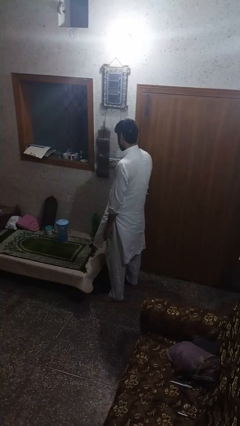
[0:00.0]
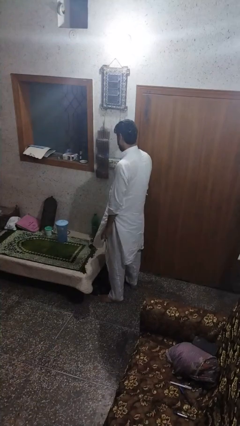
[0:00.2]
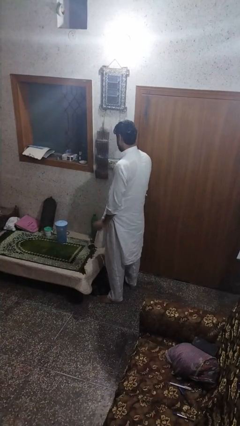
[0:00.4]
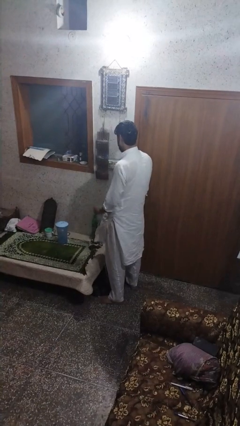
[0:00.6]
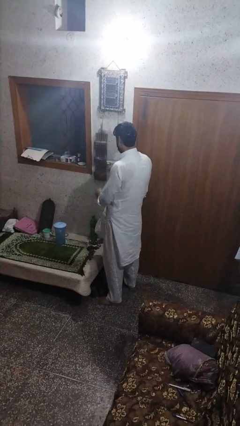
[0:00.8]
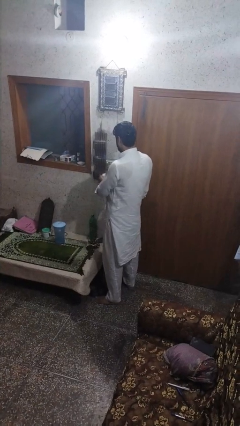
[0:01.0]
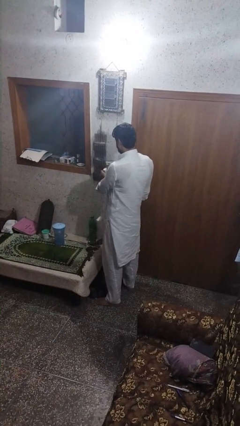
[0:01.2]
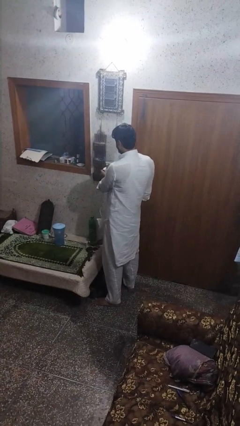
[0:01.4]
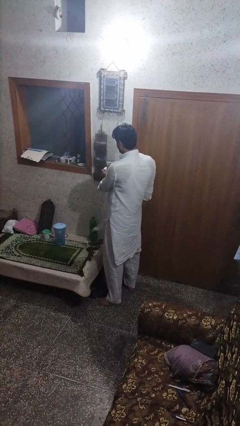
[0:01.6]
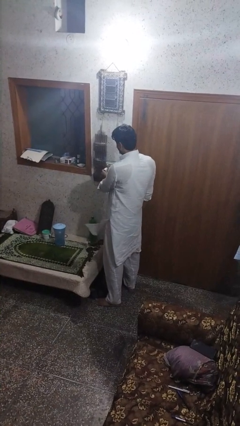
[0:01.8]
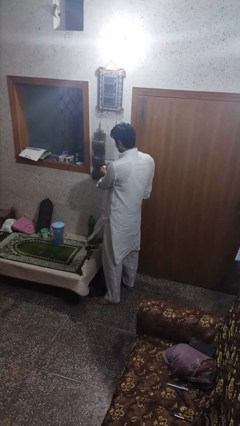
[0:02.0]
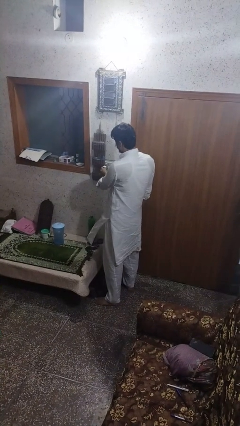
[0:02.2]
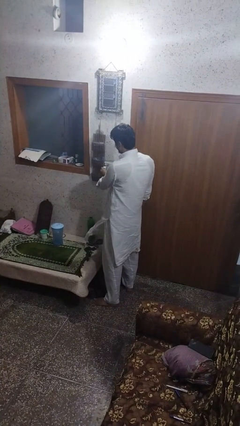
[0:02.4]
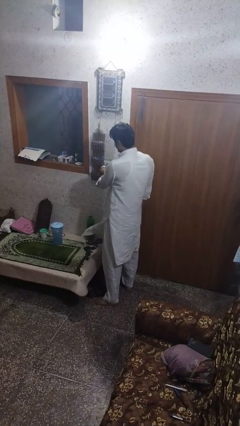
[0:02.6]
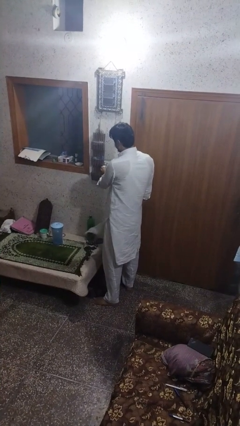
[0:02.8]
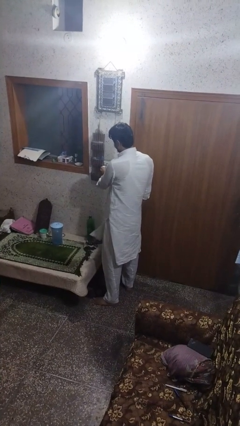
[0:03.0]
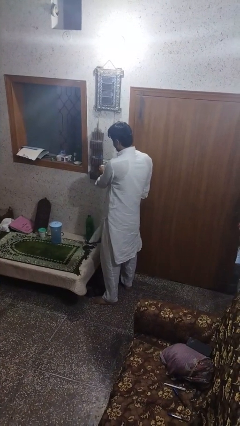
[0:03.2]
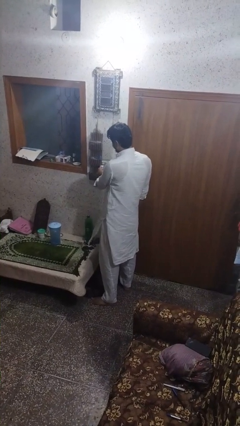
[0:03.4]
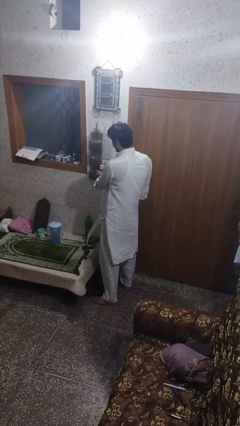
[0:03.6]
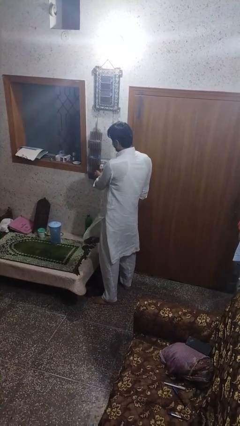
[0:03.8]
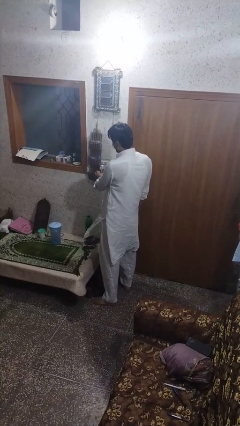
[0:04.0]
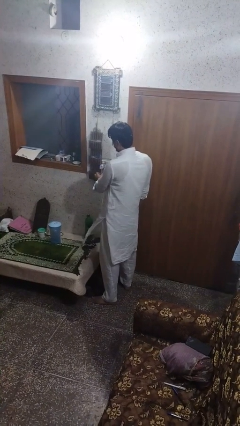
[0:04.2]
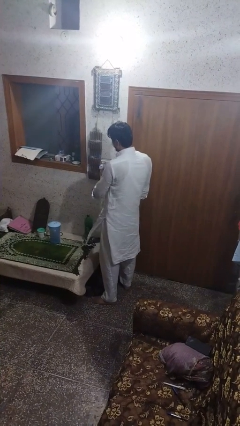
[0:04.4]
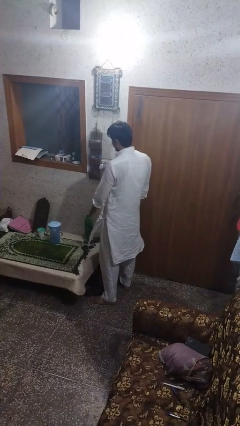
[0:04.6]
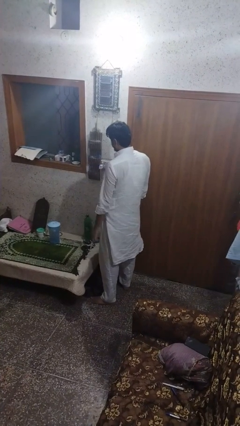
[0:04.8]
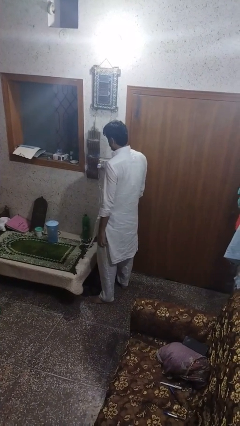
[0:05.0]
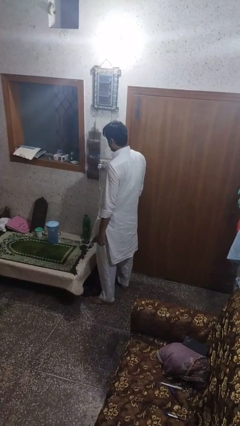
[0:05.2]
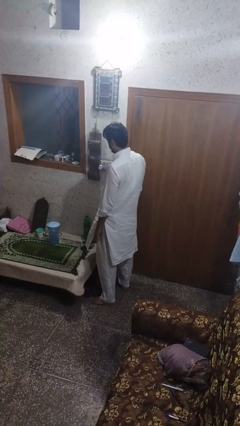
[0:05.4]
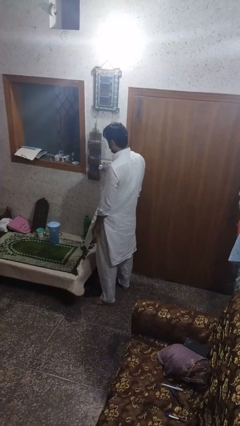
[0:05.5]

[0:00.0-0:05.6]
person plugs into electrical socket

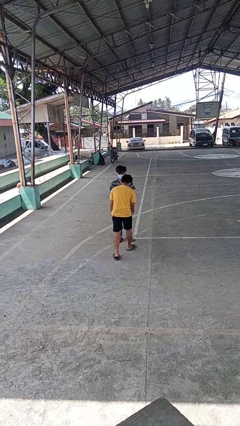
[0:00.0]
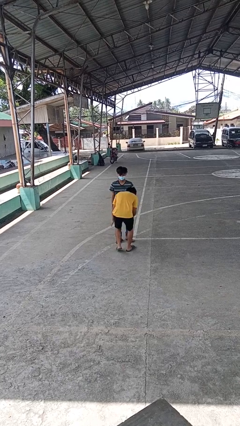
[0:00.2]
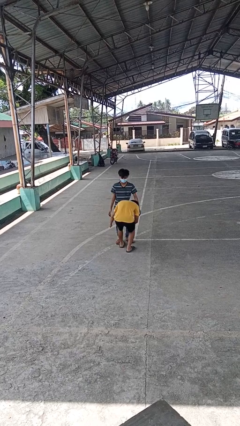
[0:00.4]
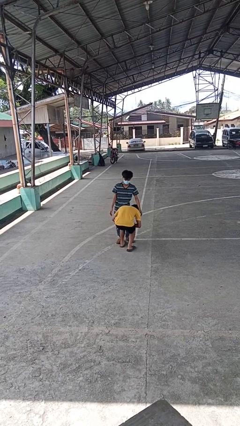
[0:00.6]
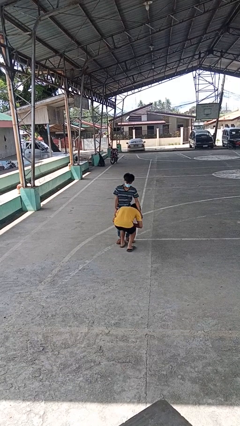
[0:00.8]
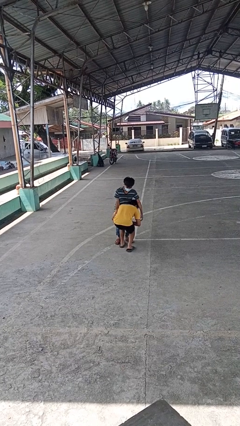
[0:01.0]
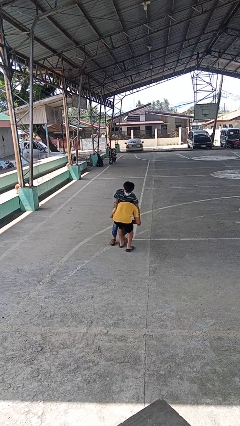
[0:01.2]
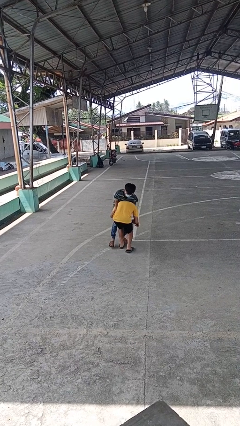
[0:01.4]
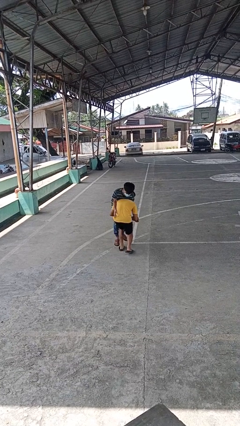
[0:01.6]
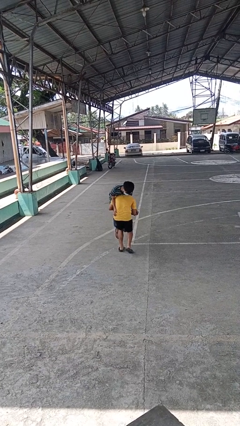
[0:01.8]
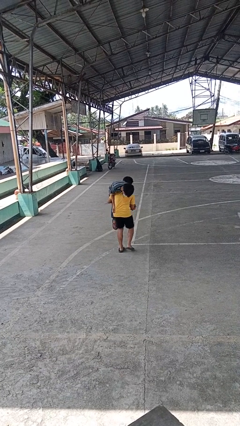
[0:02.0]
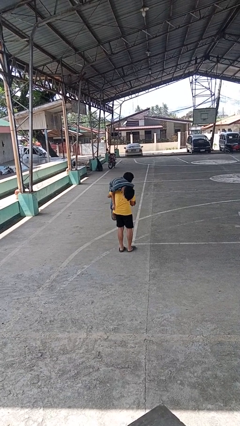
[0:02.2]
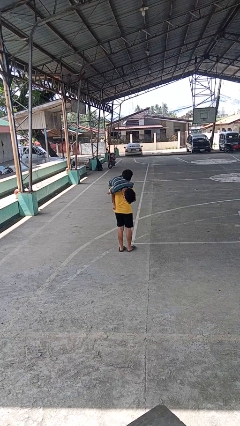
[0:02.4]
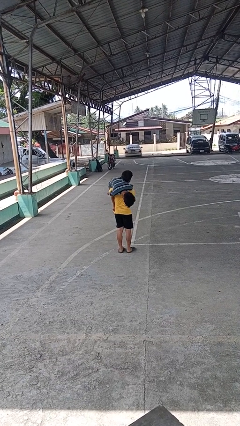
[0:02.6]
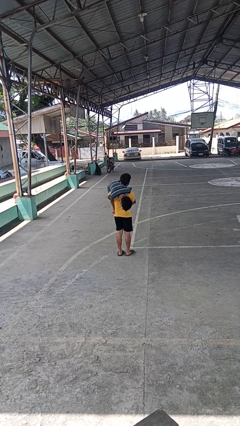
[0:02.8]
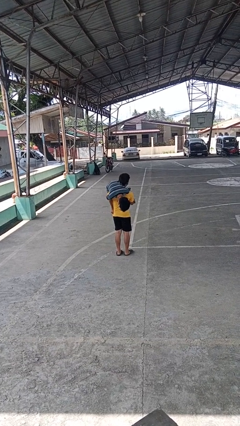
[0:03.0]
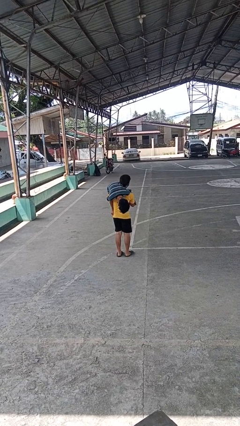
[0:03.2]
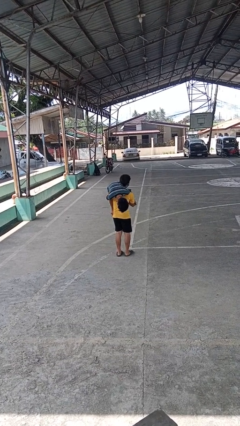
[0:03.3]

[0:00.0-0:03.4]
person carries person over shoulder

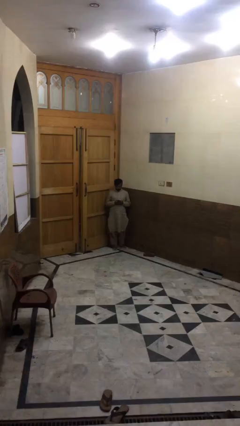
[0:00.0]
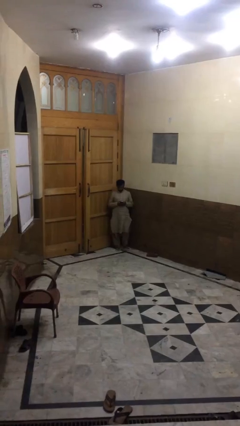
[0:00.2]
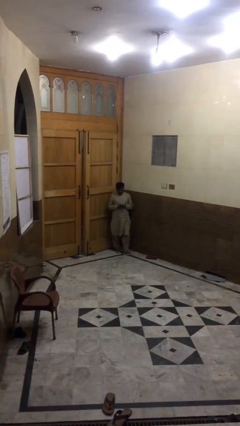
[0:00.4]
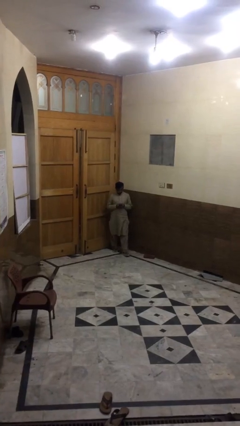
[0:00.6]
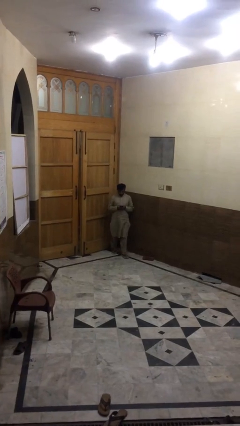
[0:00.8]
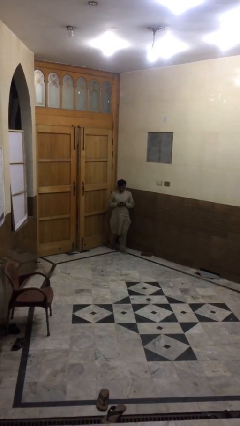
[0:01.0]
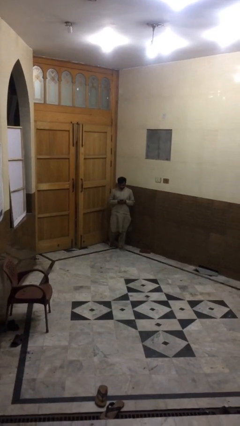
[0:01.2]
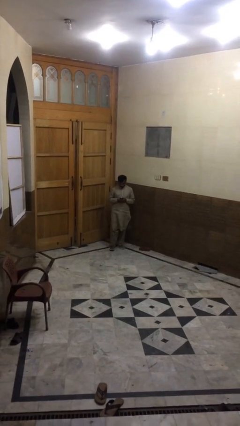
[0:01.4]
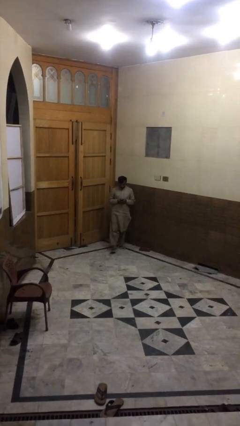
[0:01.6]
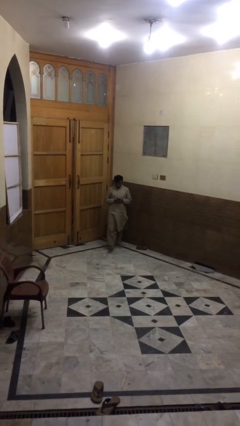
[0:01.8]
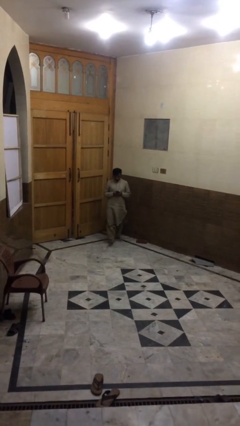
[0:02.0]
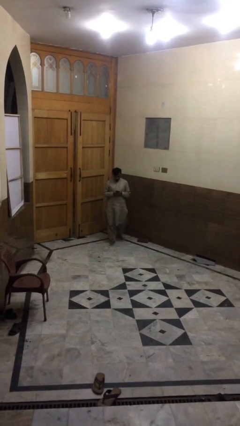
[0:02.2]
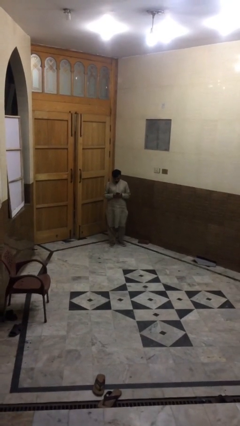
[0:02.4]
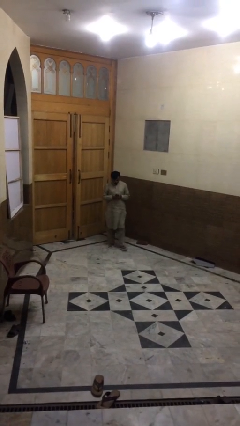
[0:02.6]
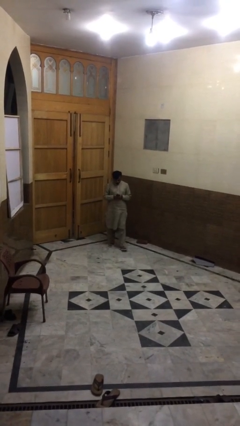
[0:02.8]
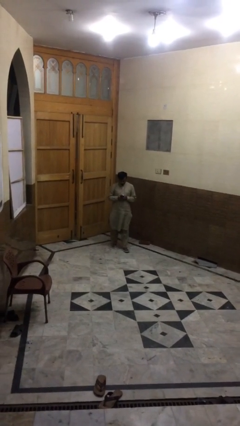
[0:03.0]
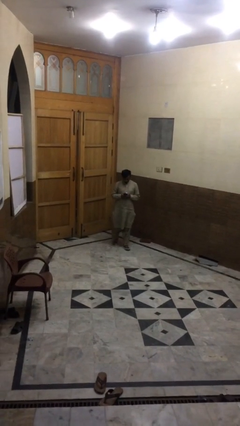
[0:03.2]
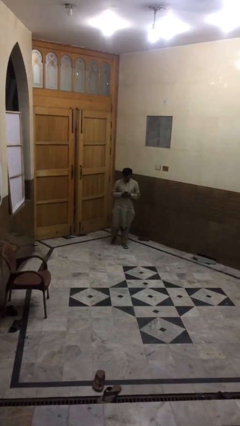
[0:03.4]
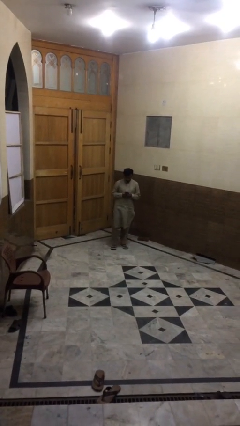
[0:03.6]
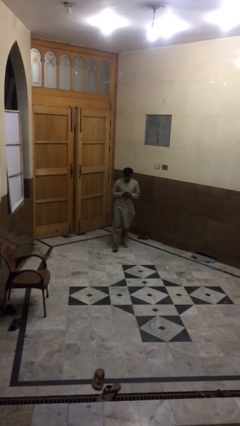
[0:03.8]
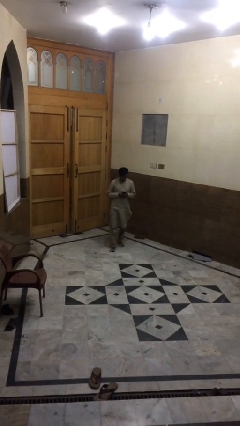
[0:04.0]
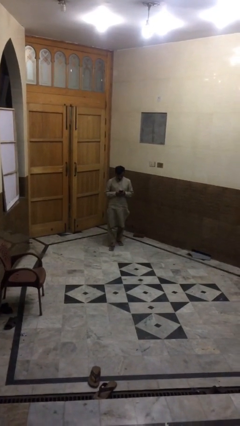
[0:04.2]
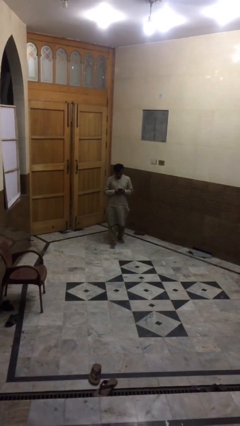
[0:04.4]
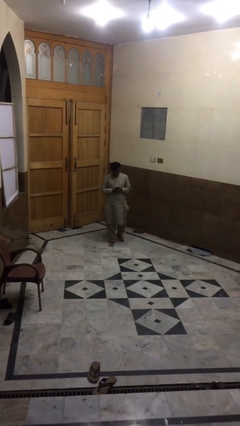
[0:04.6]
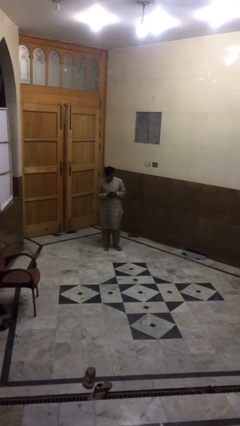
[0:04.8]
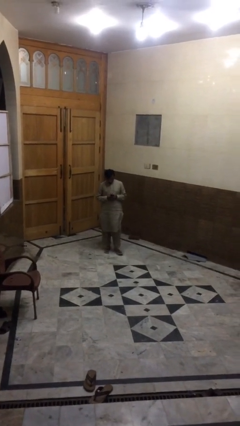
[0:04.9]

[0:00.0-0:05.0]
person texts on phone

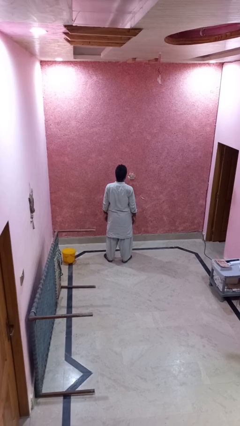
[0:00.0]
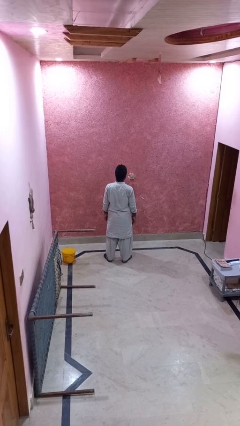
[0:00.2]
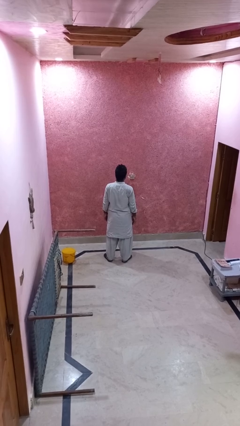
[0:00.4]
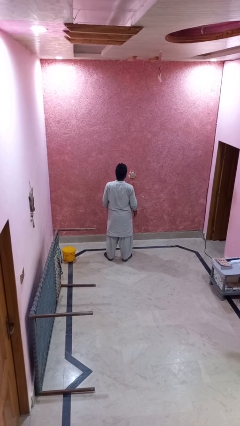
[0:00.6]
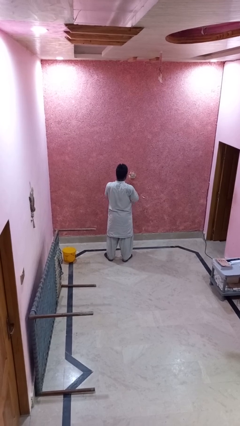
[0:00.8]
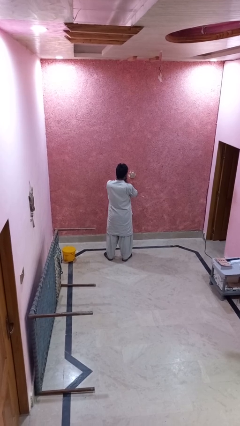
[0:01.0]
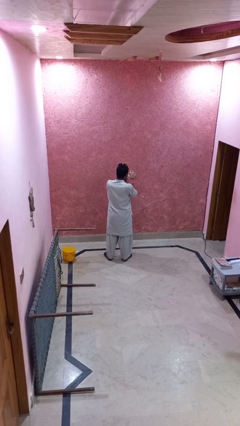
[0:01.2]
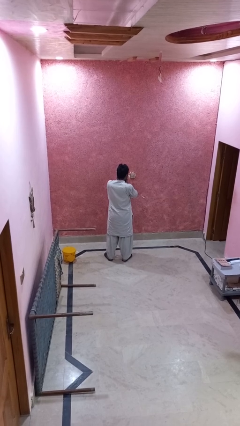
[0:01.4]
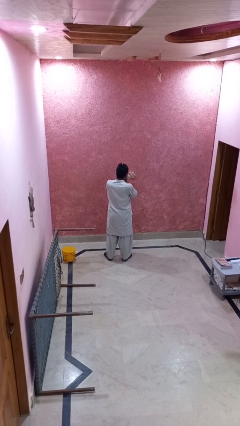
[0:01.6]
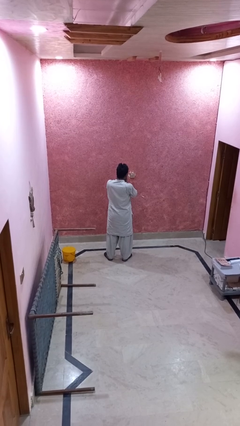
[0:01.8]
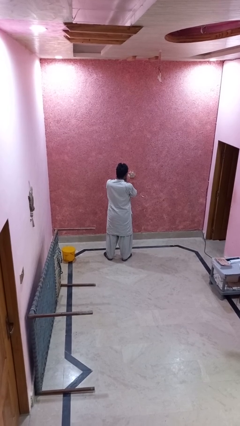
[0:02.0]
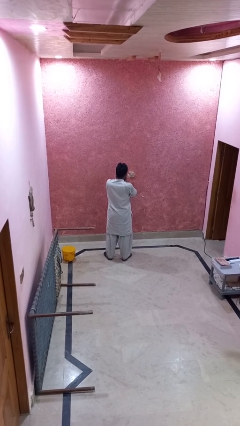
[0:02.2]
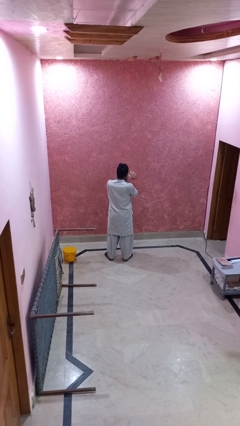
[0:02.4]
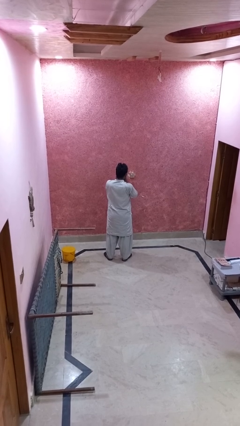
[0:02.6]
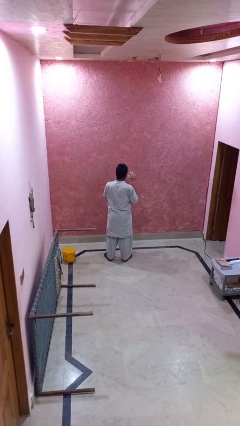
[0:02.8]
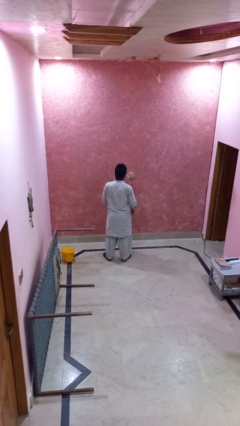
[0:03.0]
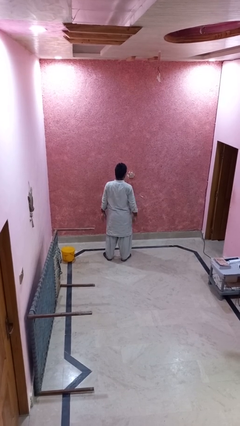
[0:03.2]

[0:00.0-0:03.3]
person sneezes into hand

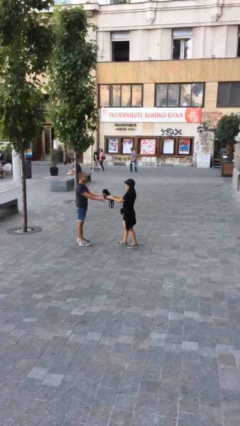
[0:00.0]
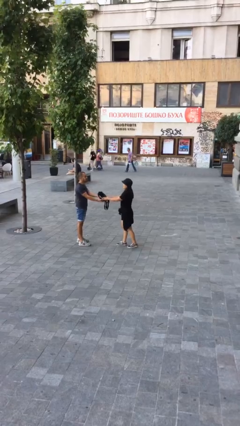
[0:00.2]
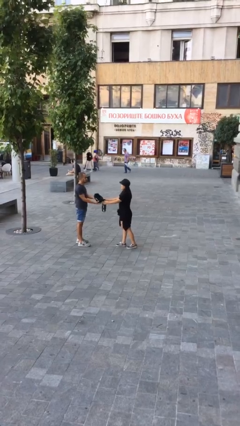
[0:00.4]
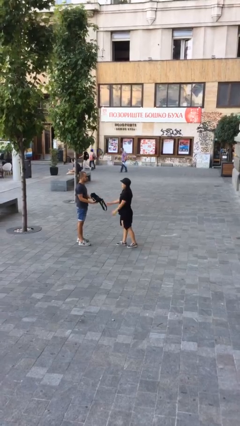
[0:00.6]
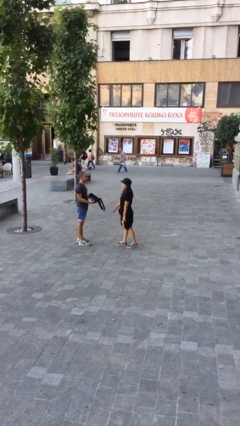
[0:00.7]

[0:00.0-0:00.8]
person transfers object to person
